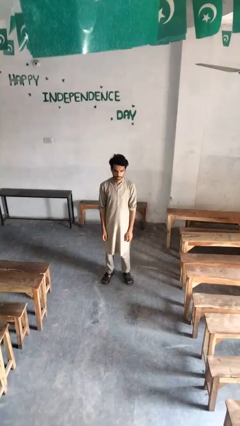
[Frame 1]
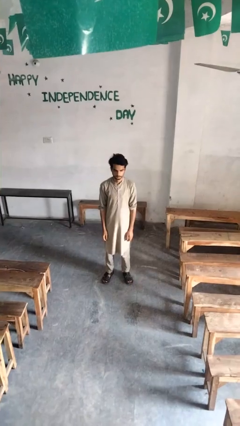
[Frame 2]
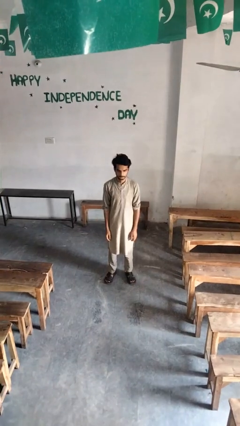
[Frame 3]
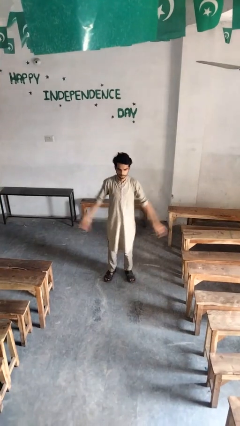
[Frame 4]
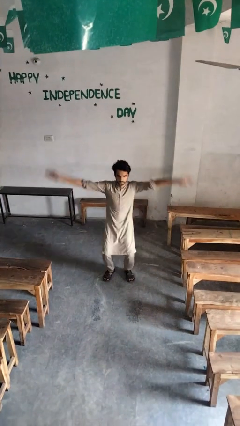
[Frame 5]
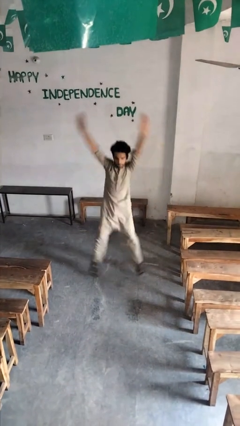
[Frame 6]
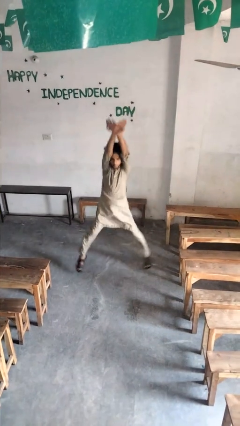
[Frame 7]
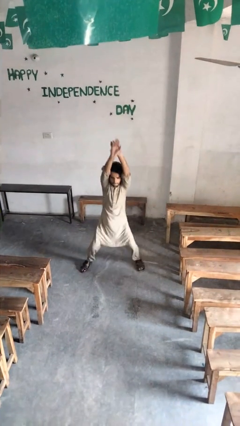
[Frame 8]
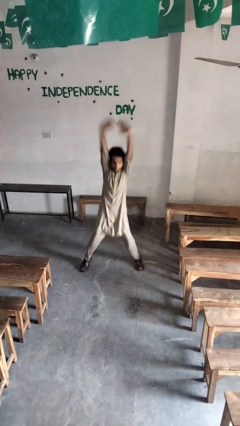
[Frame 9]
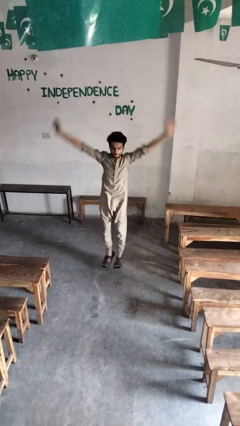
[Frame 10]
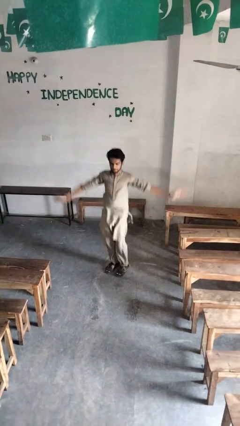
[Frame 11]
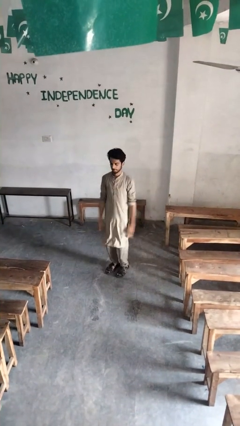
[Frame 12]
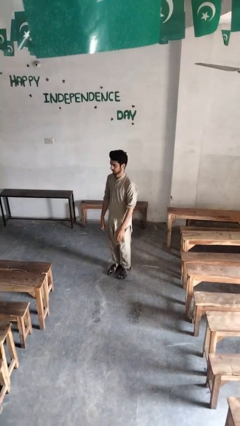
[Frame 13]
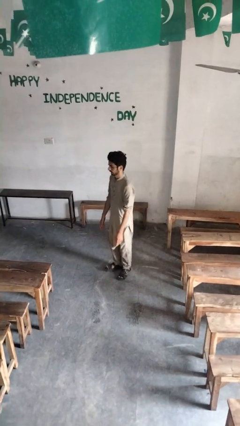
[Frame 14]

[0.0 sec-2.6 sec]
person exercises with jumping jacks

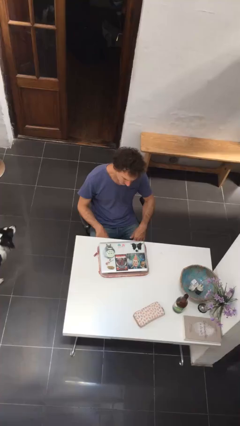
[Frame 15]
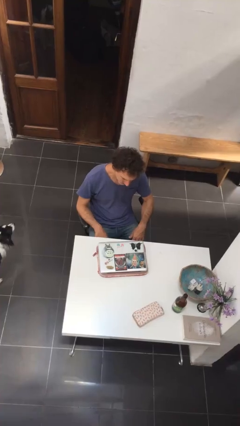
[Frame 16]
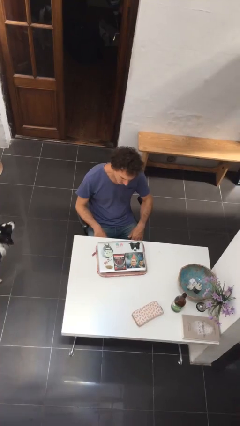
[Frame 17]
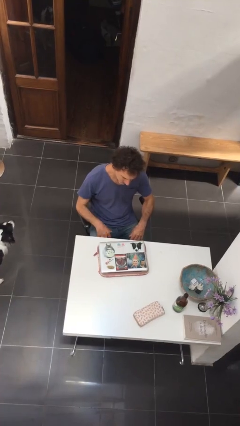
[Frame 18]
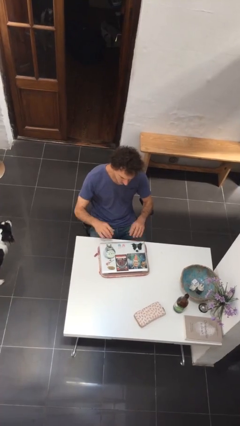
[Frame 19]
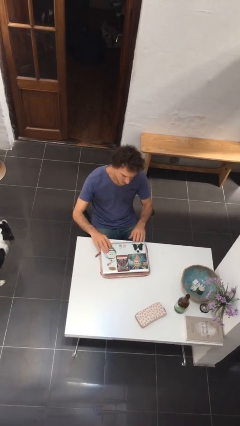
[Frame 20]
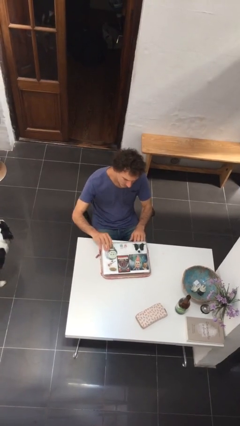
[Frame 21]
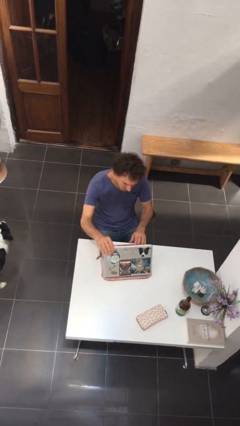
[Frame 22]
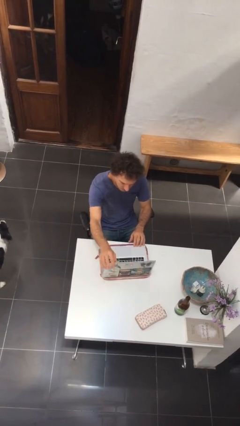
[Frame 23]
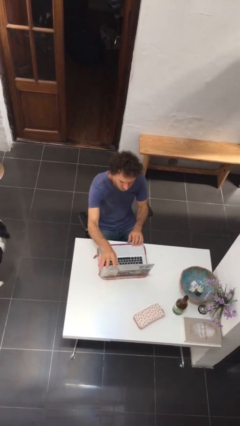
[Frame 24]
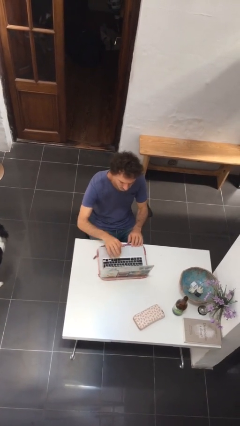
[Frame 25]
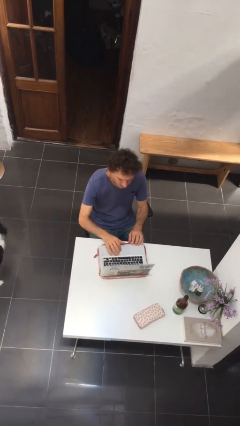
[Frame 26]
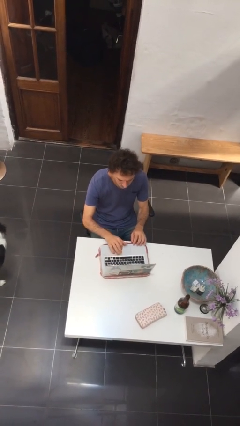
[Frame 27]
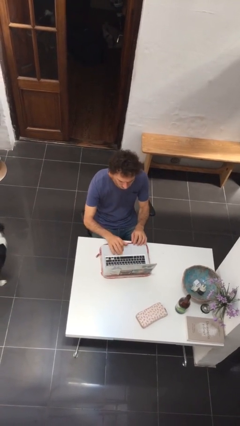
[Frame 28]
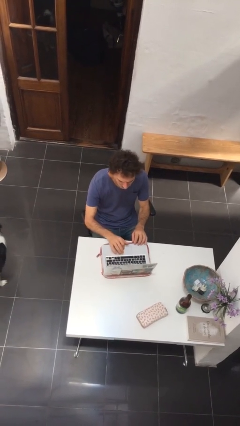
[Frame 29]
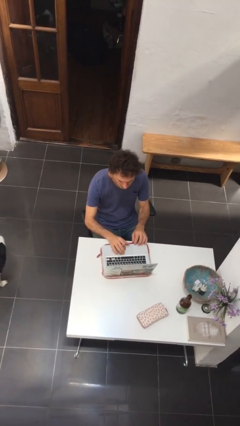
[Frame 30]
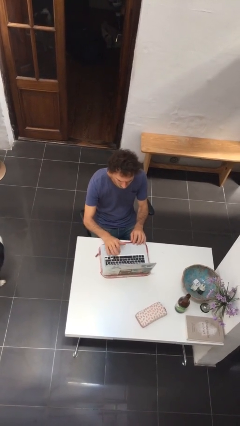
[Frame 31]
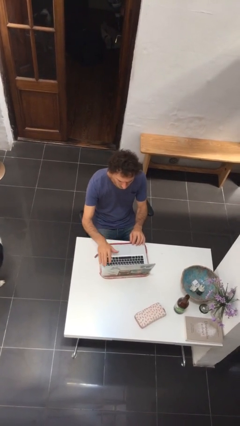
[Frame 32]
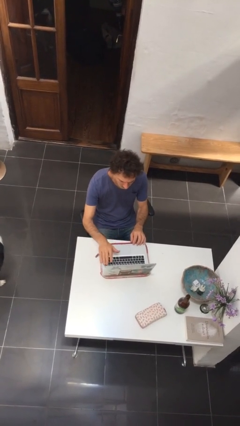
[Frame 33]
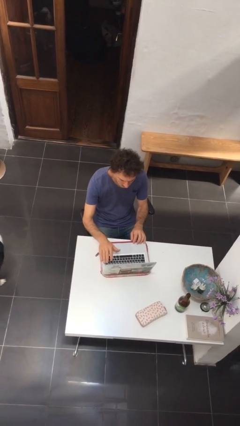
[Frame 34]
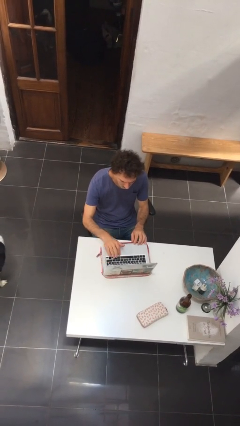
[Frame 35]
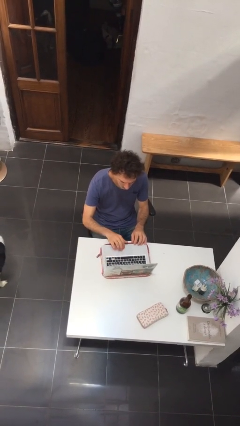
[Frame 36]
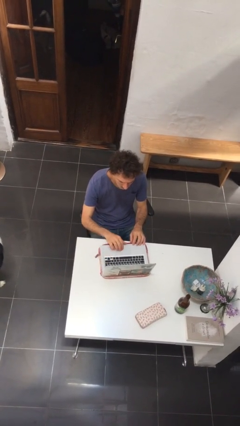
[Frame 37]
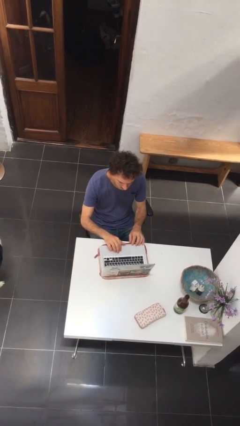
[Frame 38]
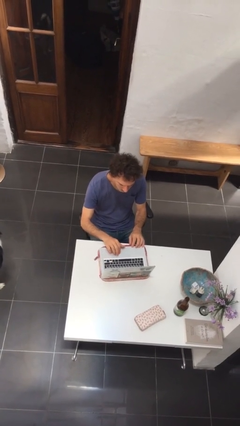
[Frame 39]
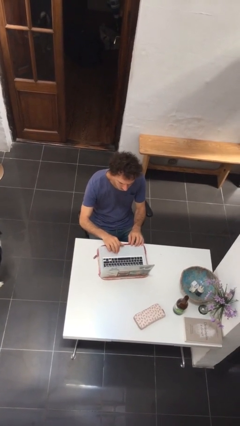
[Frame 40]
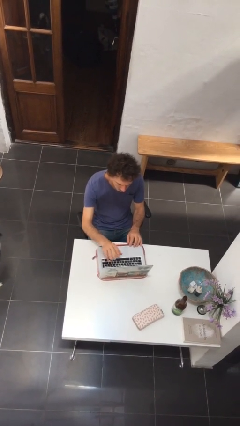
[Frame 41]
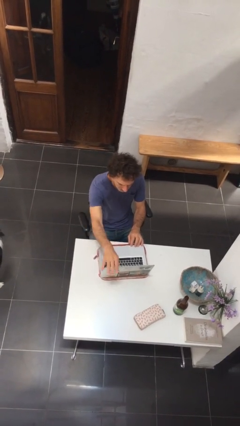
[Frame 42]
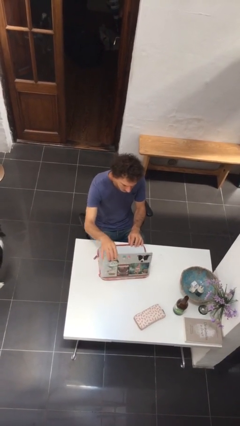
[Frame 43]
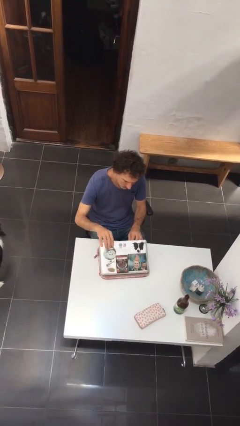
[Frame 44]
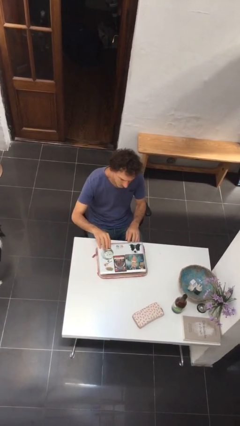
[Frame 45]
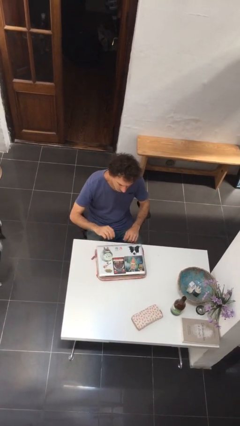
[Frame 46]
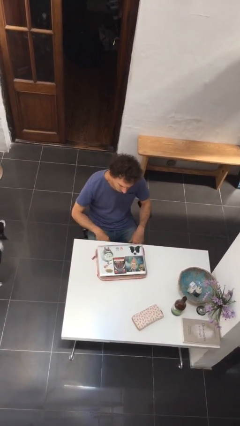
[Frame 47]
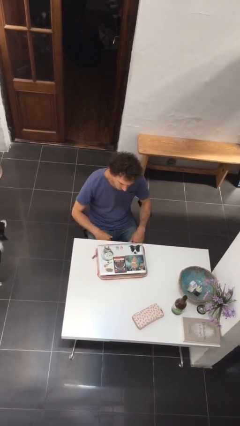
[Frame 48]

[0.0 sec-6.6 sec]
person interacts with laptop

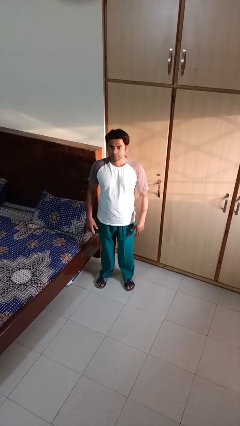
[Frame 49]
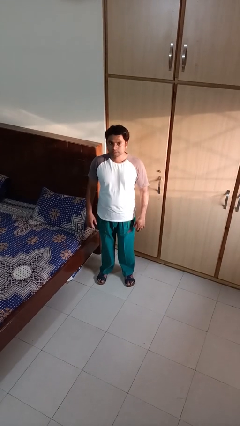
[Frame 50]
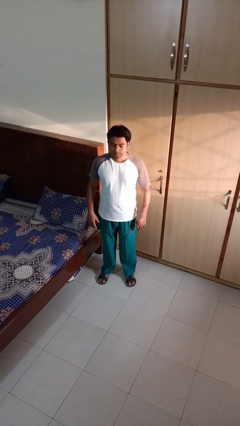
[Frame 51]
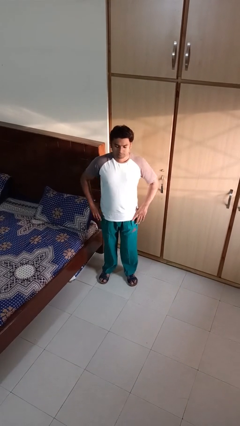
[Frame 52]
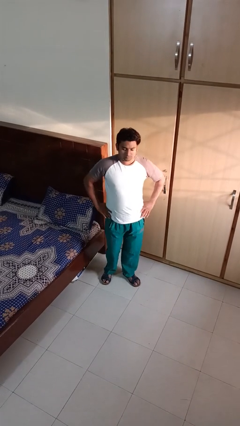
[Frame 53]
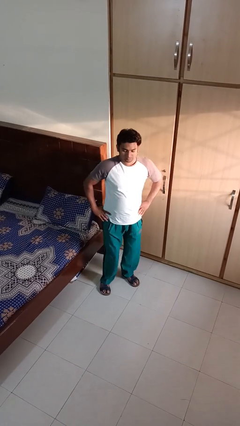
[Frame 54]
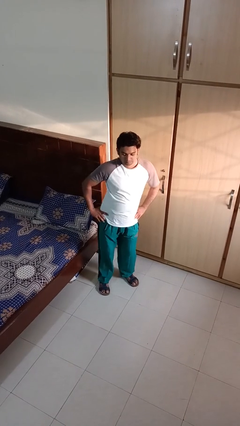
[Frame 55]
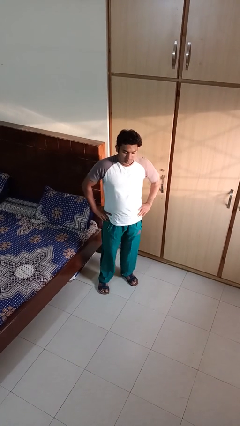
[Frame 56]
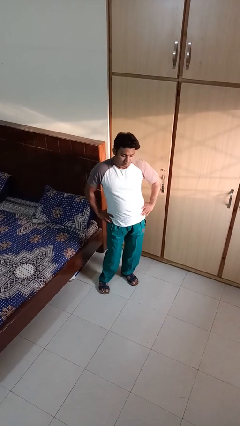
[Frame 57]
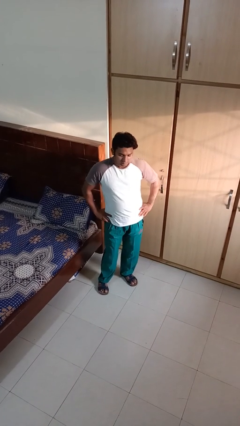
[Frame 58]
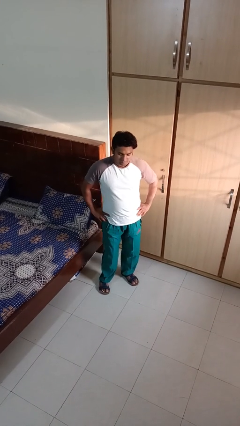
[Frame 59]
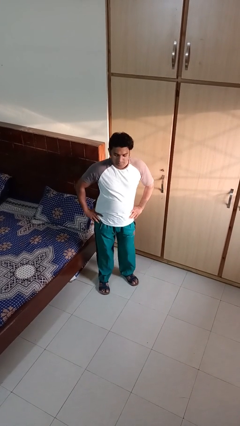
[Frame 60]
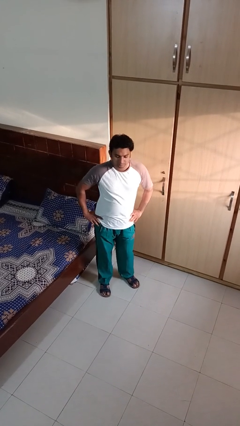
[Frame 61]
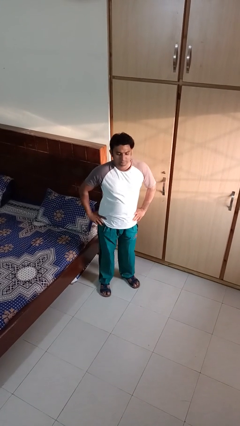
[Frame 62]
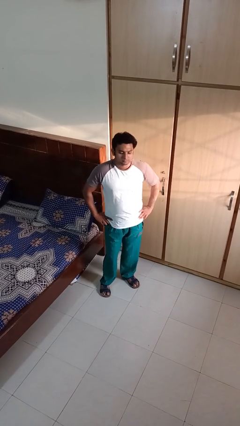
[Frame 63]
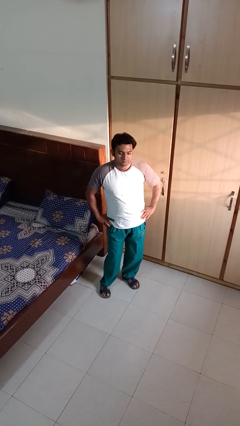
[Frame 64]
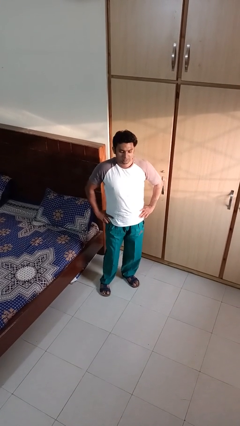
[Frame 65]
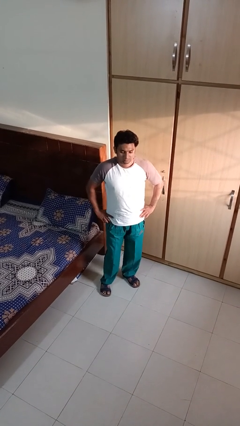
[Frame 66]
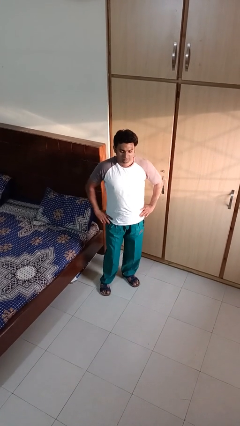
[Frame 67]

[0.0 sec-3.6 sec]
person wiggles hips

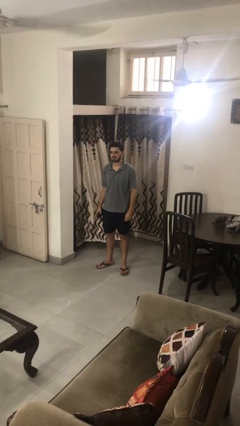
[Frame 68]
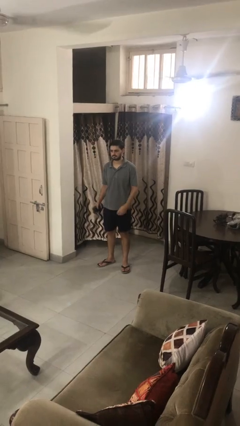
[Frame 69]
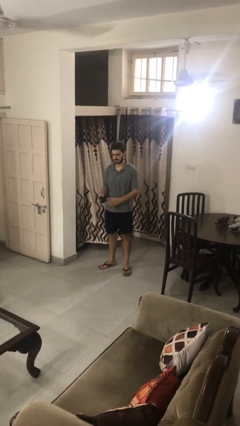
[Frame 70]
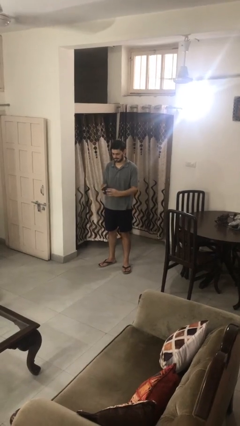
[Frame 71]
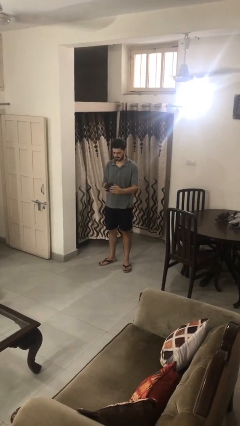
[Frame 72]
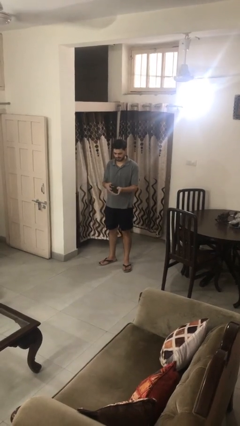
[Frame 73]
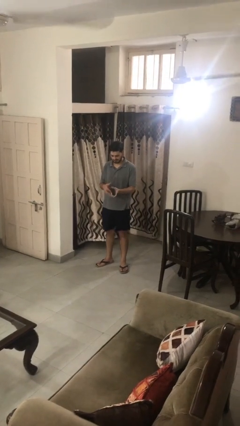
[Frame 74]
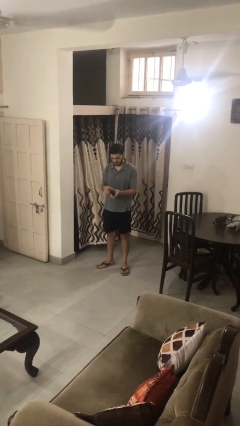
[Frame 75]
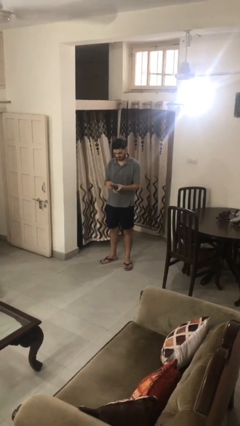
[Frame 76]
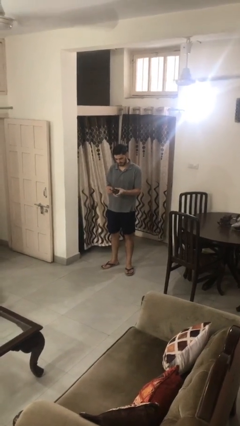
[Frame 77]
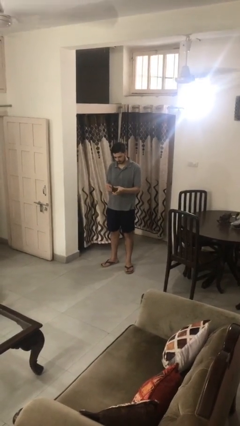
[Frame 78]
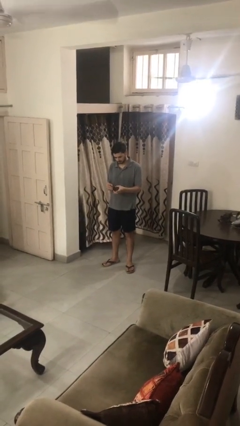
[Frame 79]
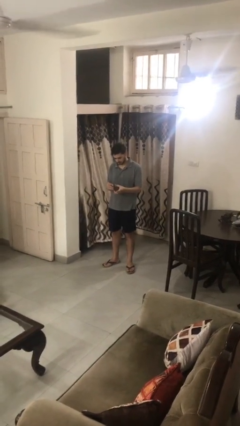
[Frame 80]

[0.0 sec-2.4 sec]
person searches in purse

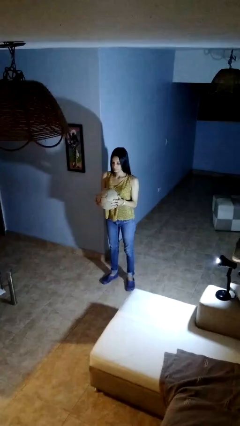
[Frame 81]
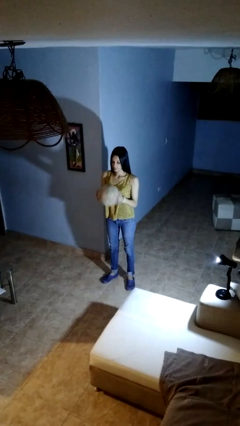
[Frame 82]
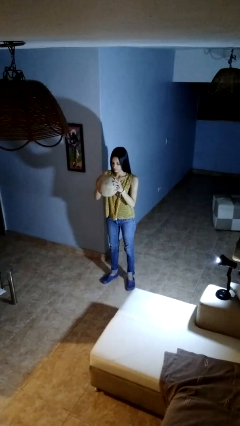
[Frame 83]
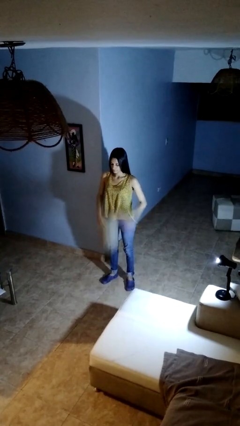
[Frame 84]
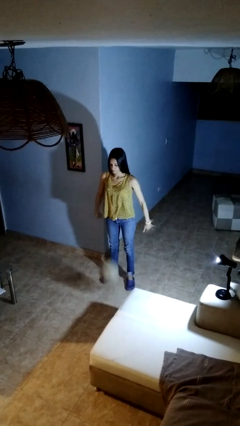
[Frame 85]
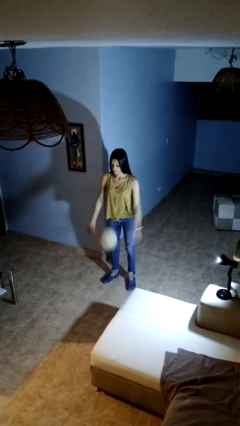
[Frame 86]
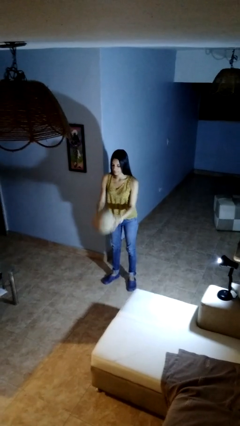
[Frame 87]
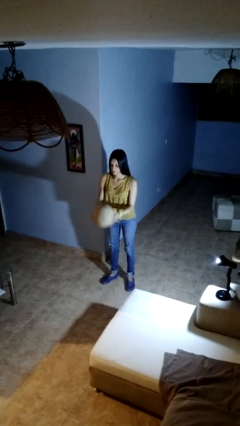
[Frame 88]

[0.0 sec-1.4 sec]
person bounces ball on floor

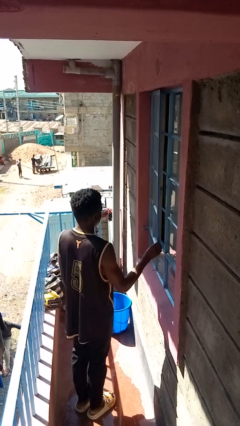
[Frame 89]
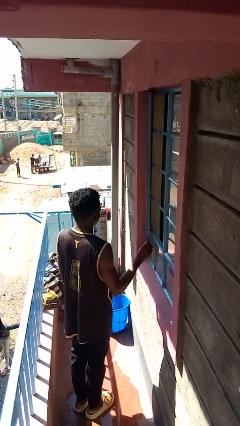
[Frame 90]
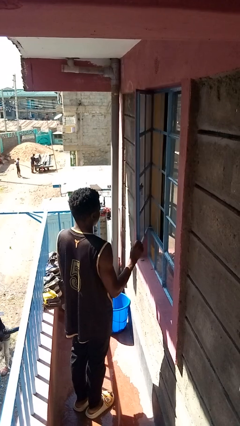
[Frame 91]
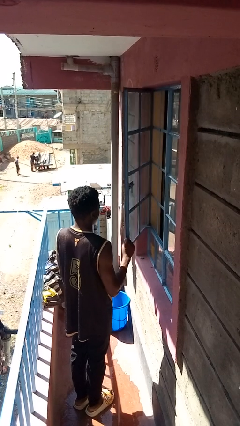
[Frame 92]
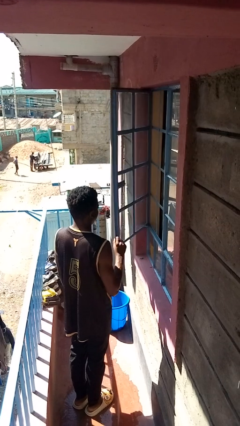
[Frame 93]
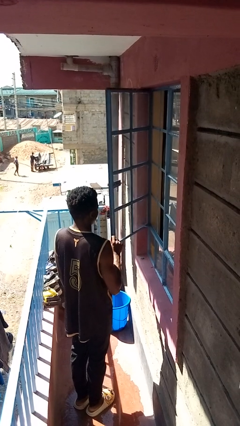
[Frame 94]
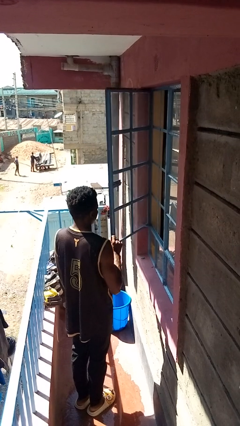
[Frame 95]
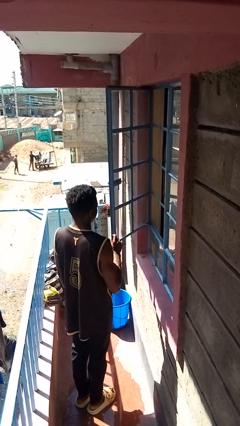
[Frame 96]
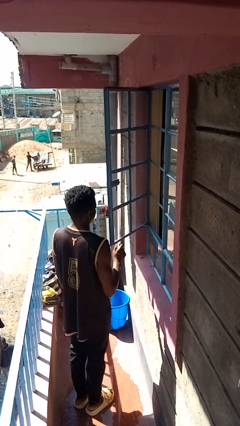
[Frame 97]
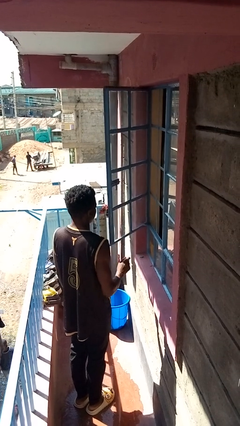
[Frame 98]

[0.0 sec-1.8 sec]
person opens home window
